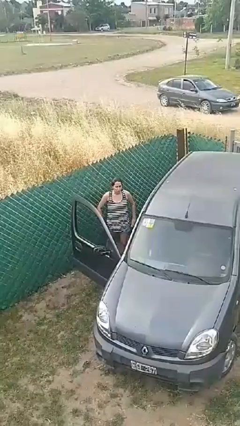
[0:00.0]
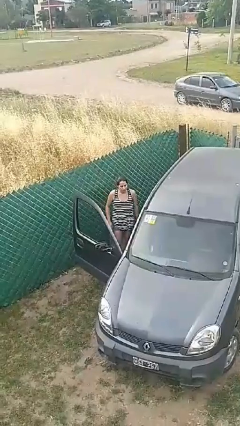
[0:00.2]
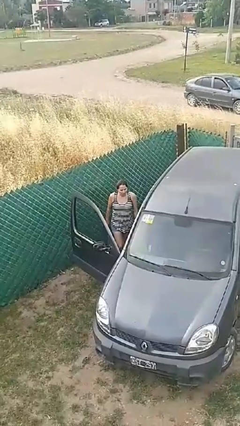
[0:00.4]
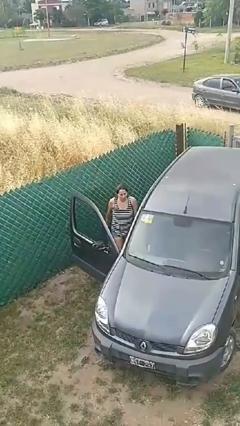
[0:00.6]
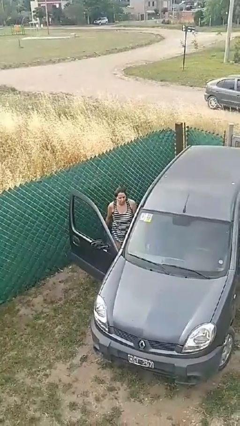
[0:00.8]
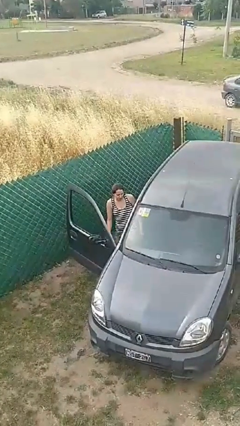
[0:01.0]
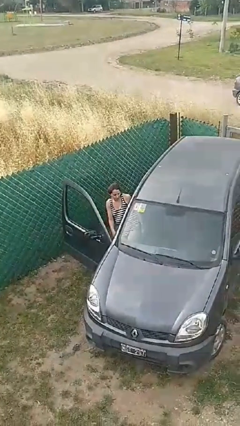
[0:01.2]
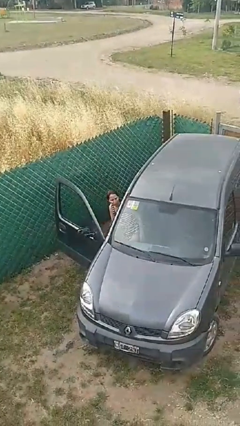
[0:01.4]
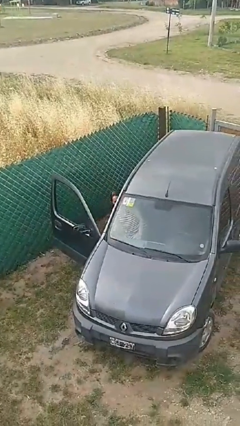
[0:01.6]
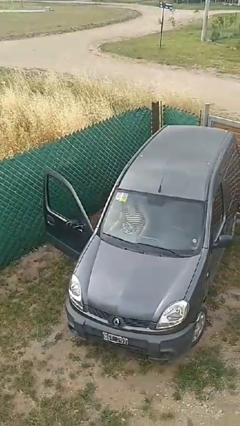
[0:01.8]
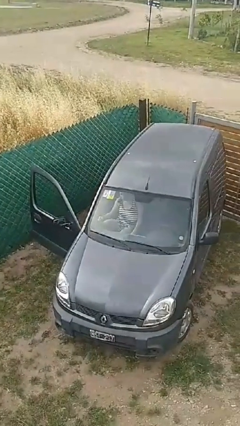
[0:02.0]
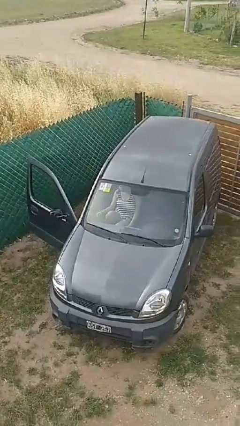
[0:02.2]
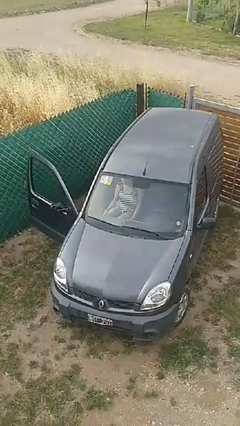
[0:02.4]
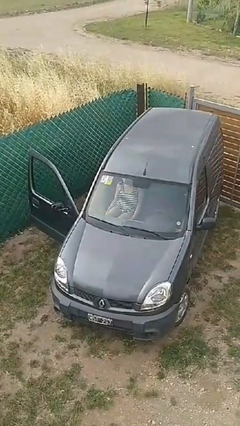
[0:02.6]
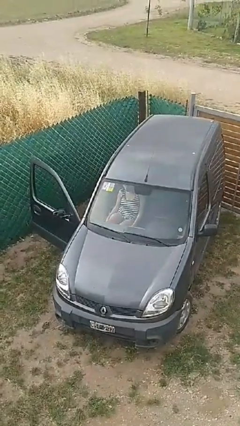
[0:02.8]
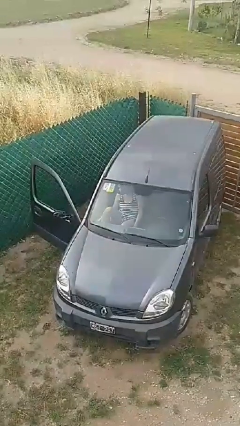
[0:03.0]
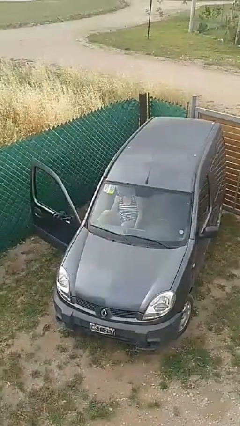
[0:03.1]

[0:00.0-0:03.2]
person enters car

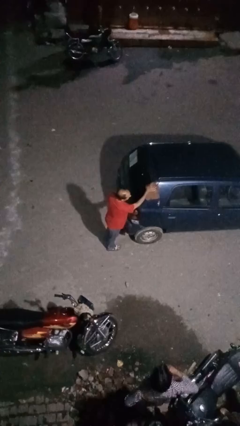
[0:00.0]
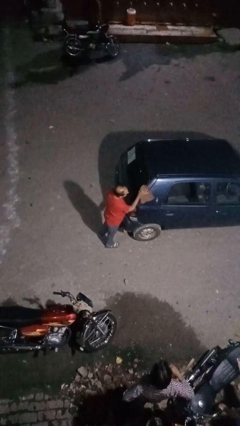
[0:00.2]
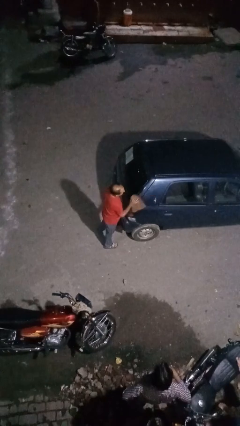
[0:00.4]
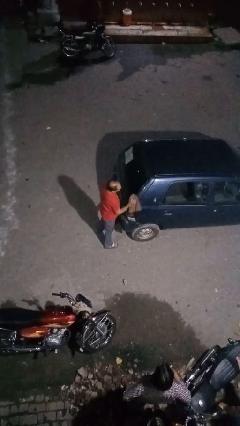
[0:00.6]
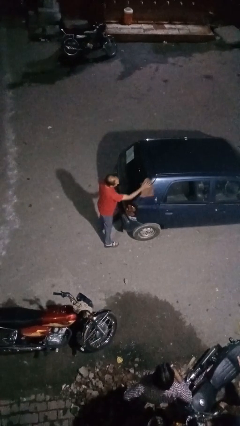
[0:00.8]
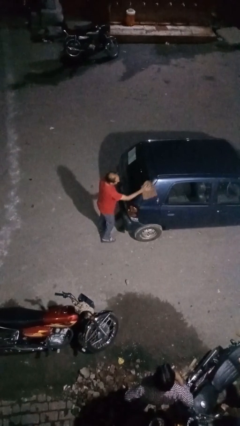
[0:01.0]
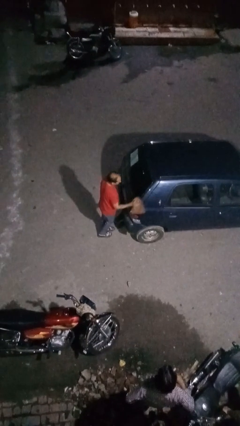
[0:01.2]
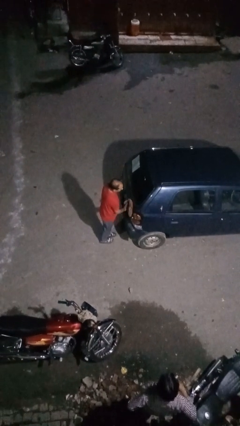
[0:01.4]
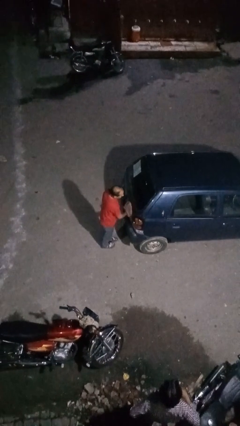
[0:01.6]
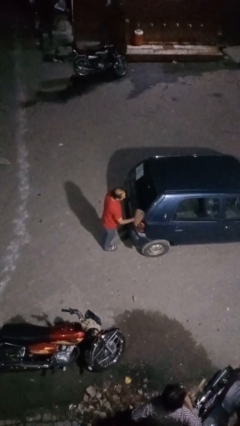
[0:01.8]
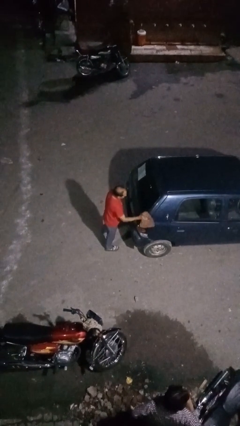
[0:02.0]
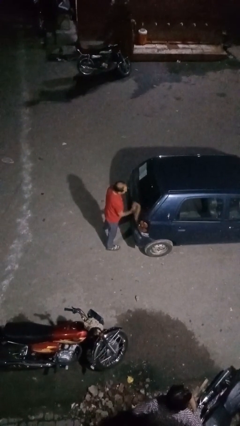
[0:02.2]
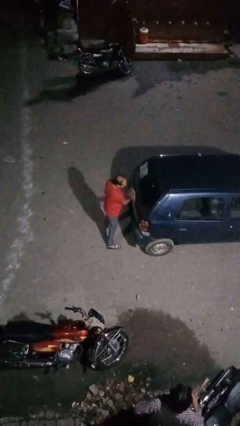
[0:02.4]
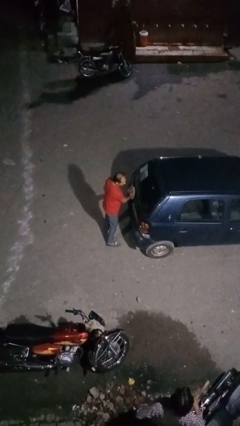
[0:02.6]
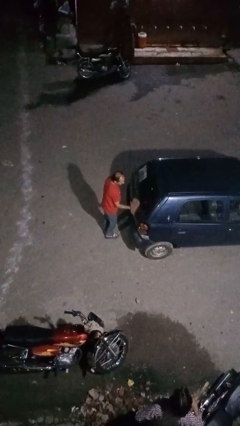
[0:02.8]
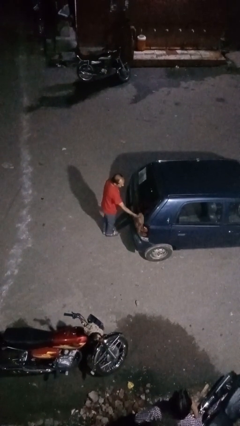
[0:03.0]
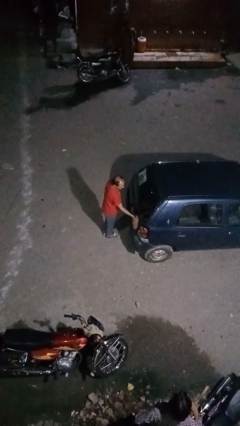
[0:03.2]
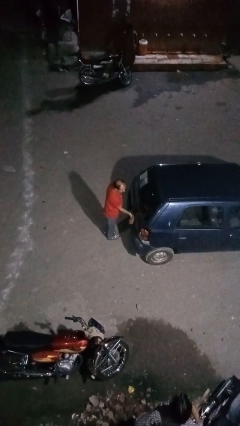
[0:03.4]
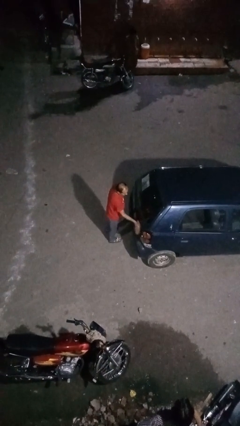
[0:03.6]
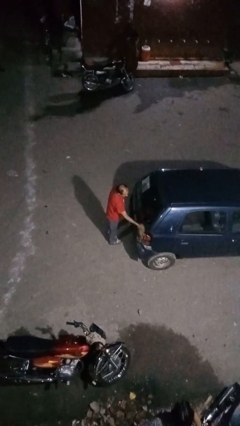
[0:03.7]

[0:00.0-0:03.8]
person polishes car with rag

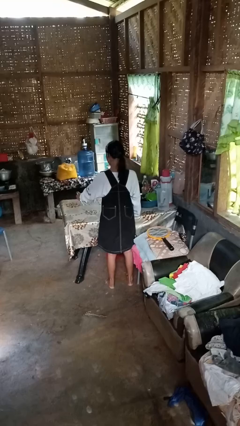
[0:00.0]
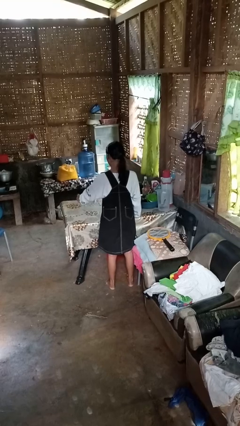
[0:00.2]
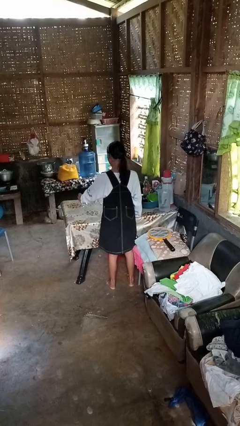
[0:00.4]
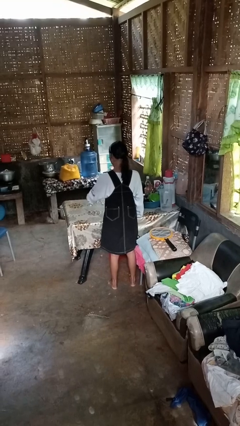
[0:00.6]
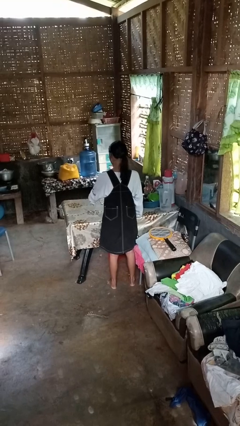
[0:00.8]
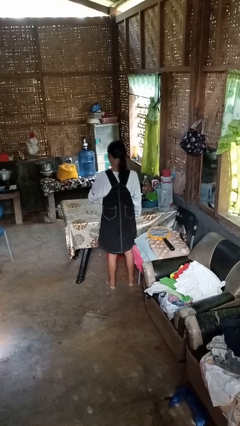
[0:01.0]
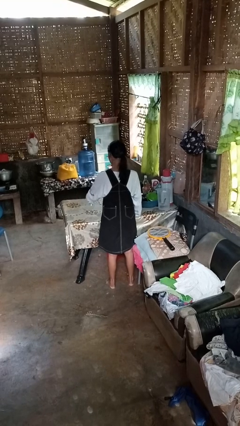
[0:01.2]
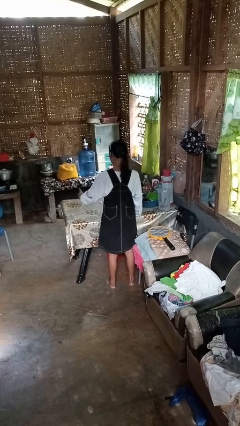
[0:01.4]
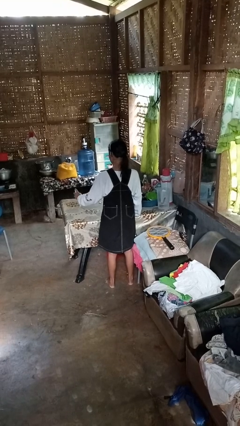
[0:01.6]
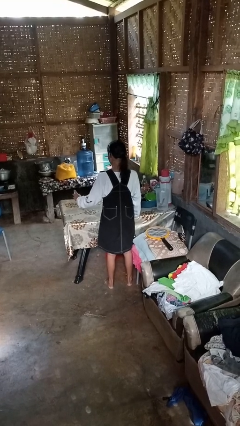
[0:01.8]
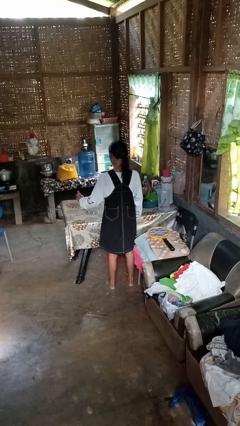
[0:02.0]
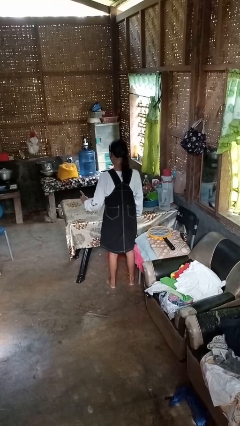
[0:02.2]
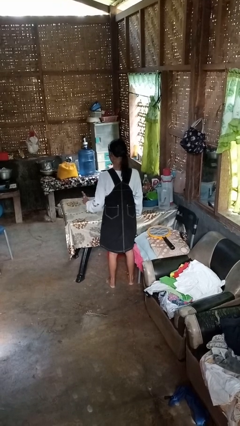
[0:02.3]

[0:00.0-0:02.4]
person sprays from bottle

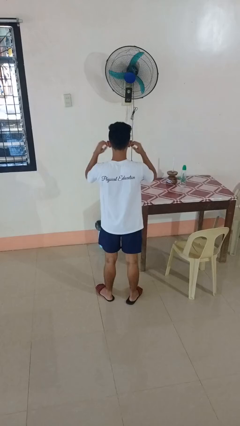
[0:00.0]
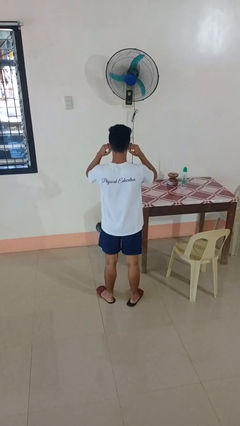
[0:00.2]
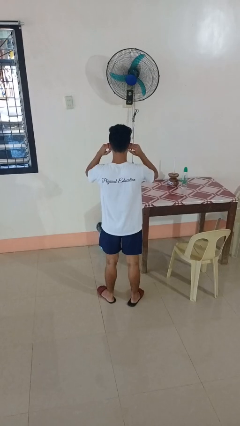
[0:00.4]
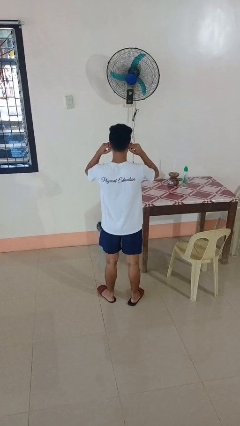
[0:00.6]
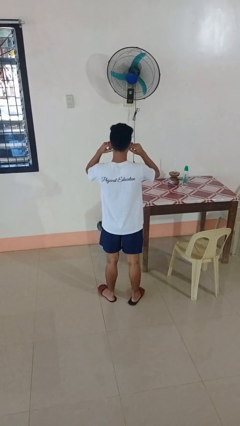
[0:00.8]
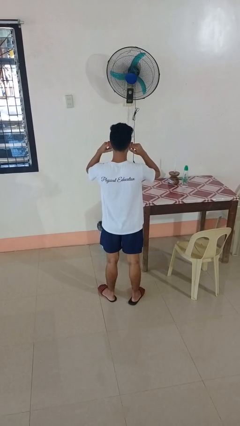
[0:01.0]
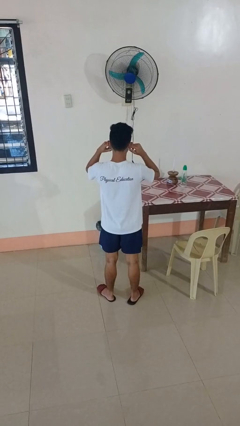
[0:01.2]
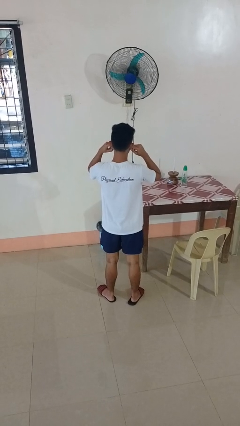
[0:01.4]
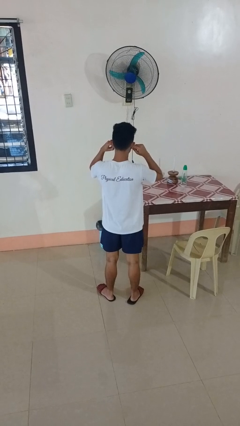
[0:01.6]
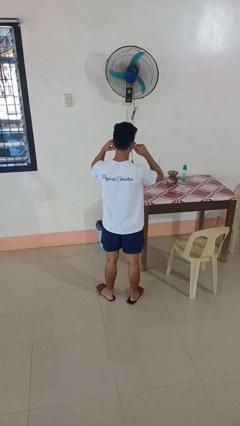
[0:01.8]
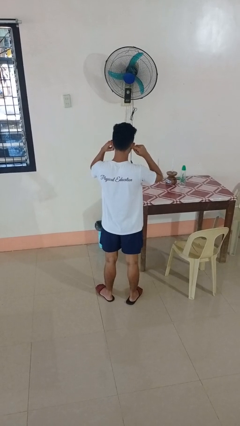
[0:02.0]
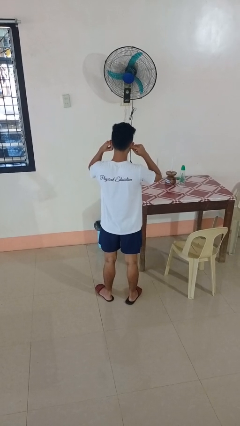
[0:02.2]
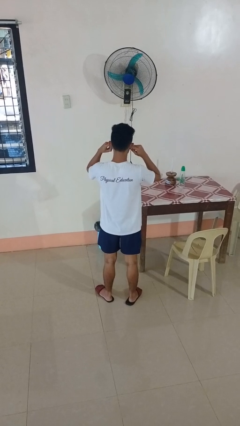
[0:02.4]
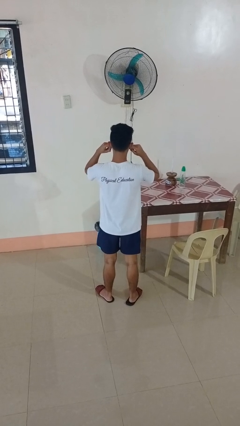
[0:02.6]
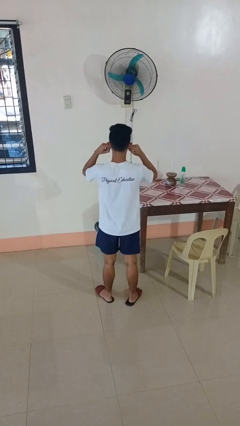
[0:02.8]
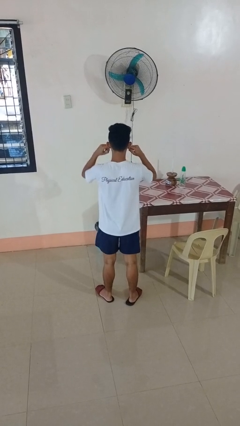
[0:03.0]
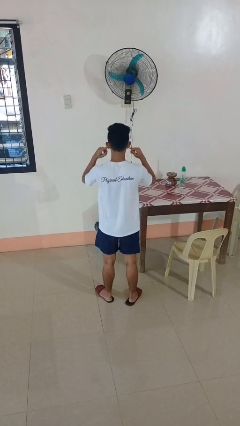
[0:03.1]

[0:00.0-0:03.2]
person puts fingers in ear

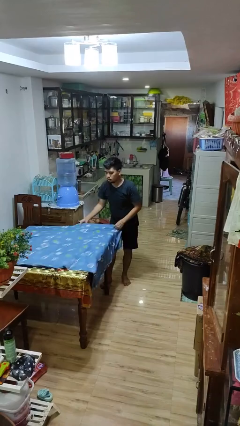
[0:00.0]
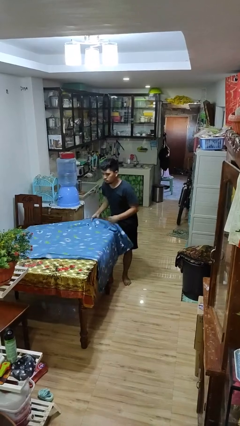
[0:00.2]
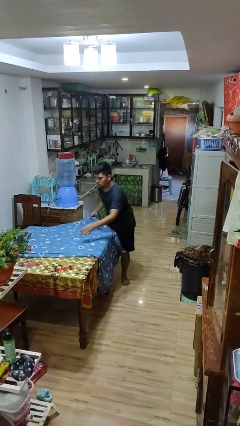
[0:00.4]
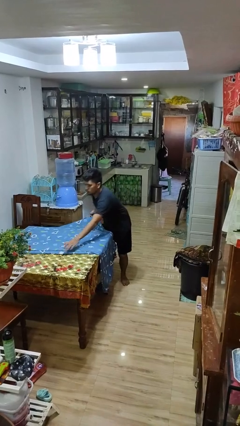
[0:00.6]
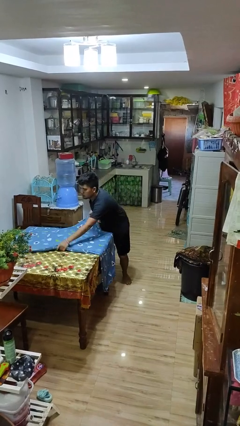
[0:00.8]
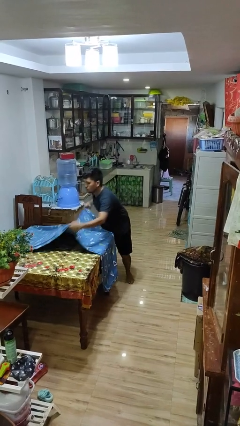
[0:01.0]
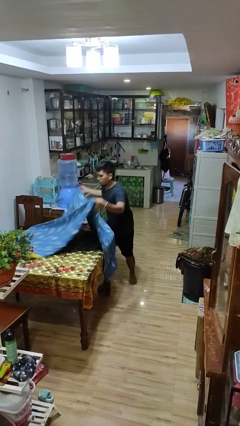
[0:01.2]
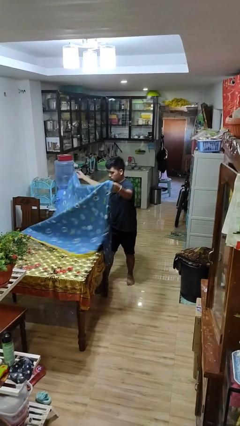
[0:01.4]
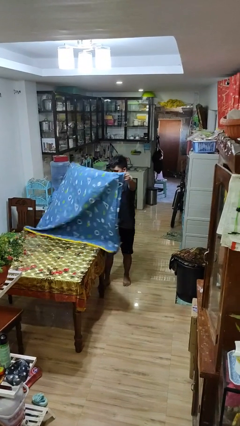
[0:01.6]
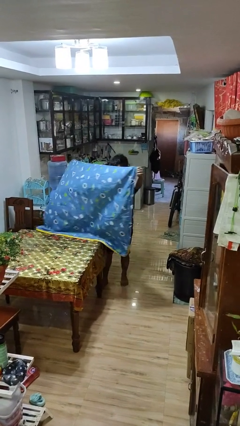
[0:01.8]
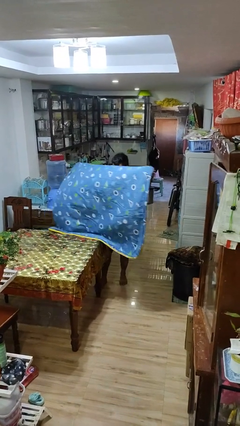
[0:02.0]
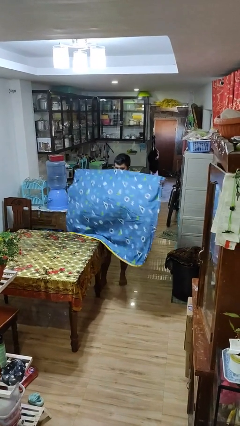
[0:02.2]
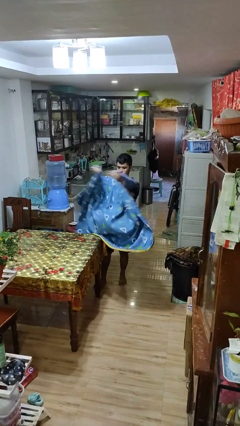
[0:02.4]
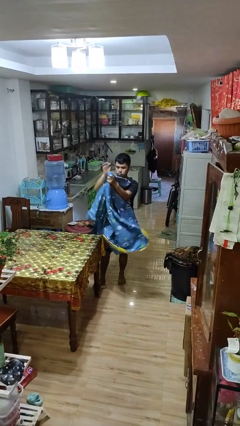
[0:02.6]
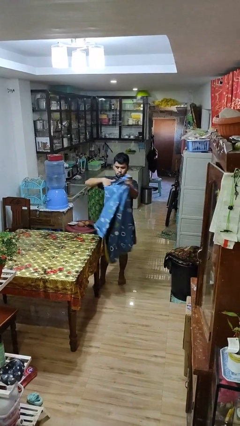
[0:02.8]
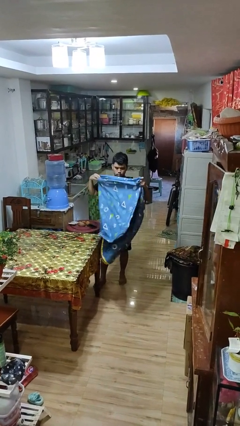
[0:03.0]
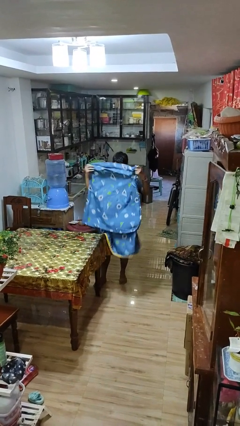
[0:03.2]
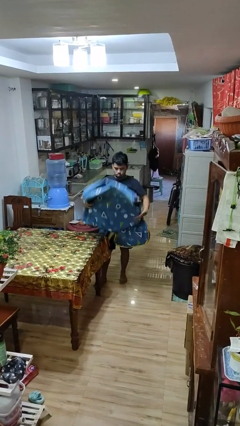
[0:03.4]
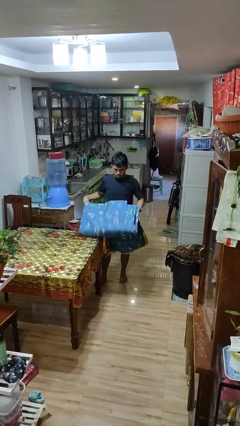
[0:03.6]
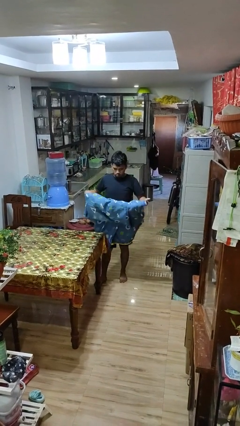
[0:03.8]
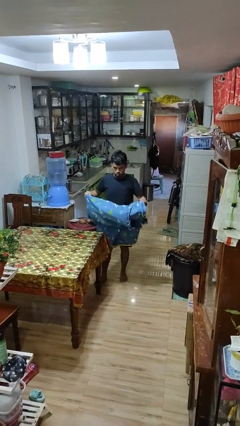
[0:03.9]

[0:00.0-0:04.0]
person folds tablecloth

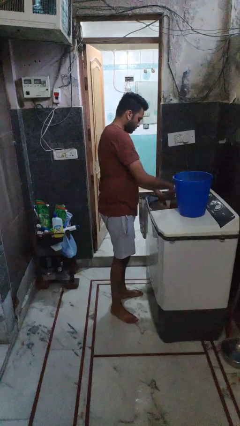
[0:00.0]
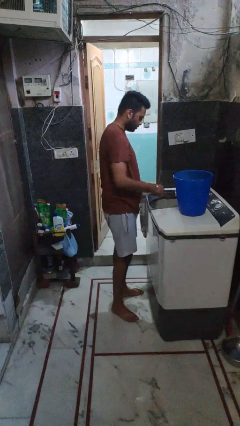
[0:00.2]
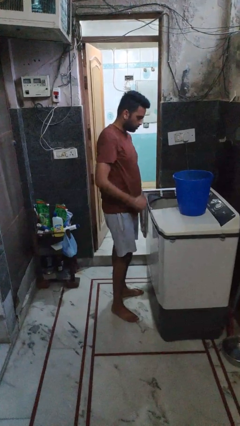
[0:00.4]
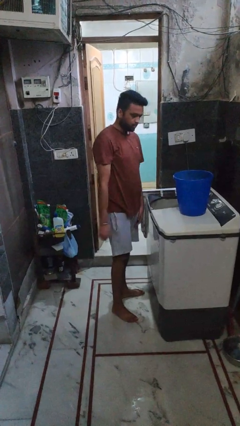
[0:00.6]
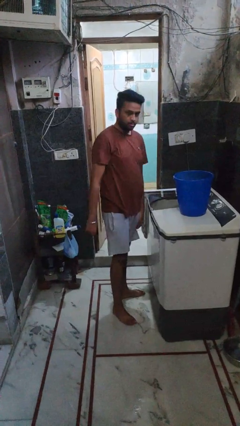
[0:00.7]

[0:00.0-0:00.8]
person loads clotheswasher
